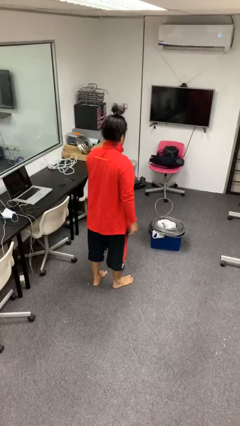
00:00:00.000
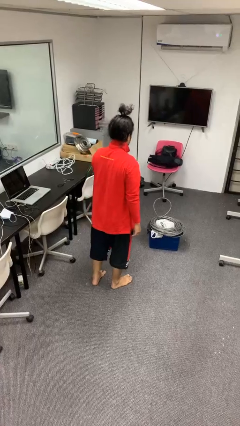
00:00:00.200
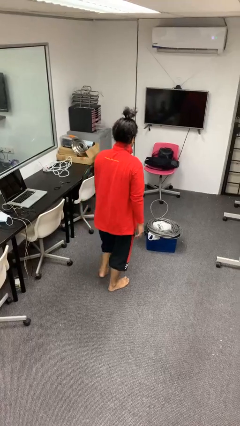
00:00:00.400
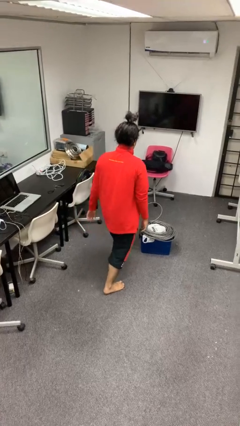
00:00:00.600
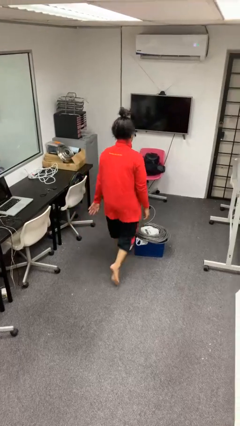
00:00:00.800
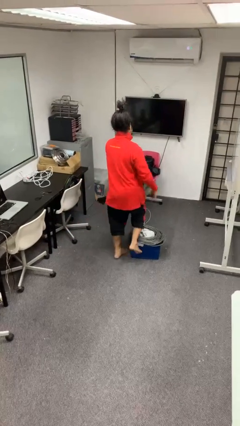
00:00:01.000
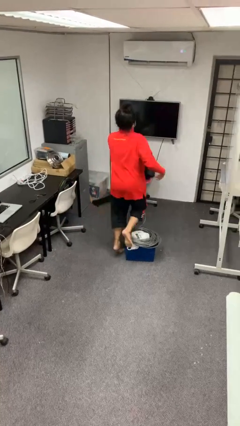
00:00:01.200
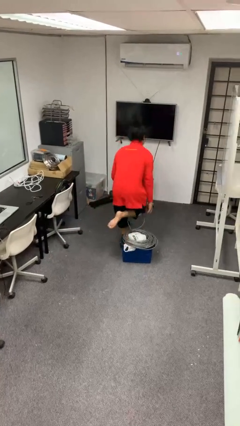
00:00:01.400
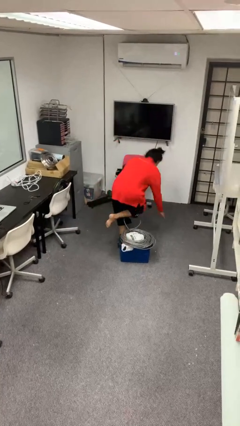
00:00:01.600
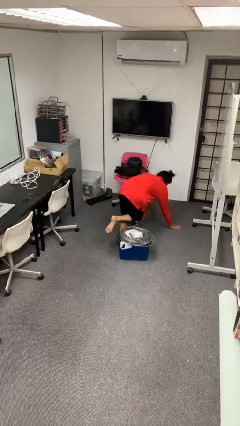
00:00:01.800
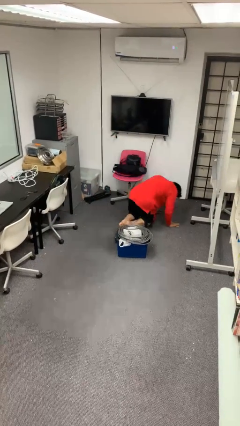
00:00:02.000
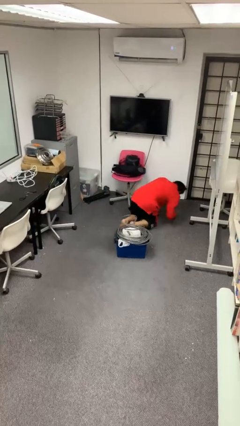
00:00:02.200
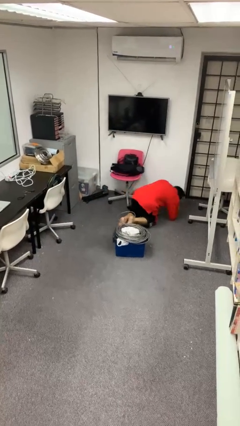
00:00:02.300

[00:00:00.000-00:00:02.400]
person trips on object on floor

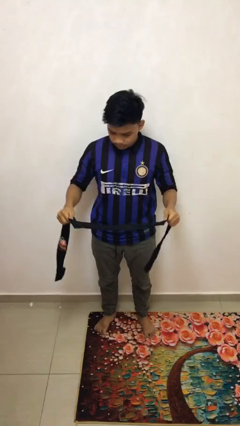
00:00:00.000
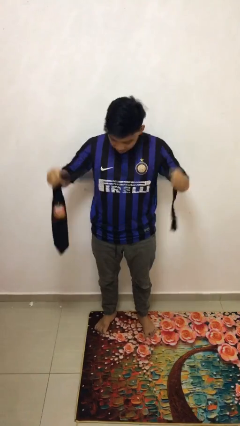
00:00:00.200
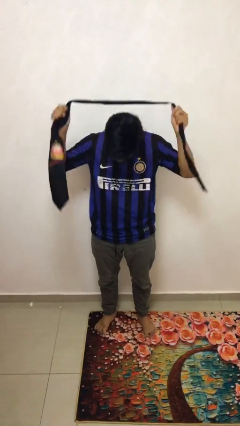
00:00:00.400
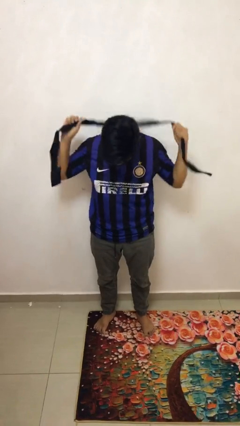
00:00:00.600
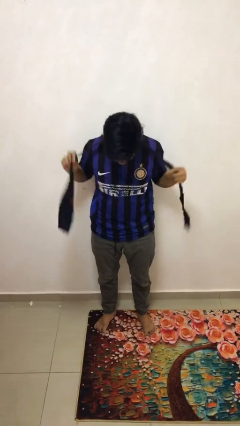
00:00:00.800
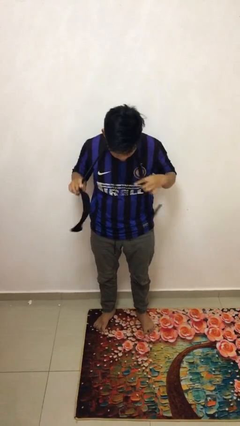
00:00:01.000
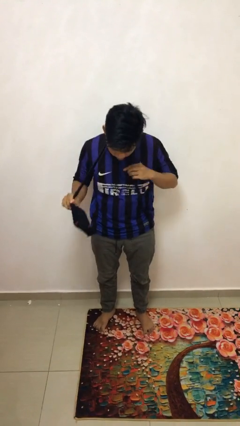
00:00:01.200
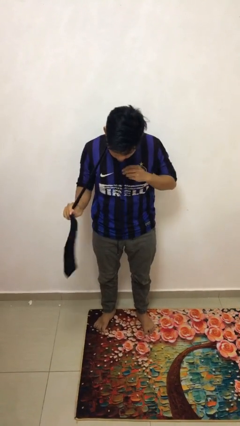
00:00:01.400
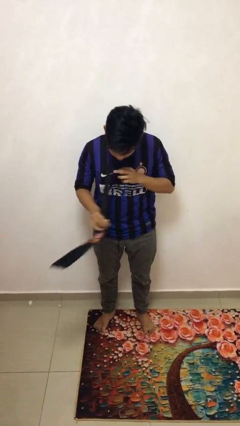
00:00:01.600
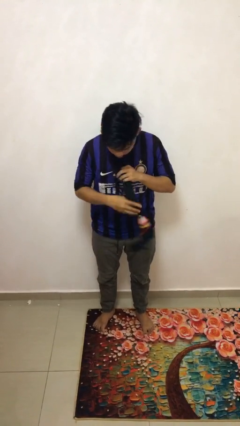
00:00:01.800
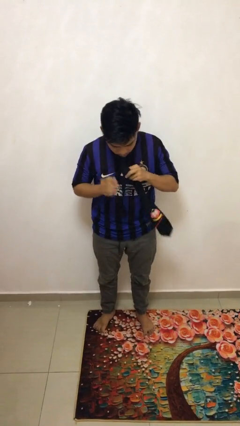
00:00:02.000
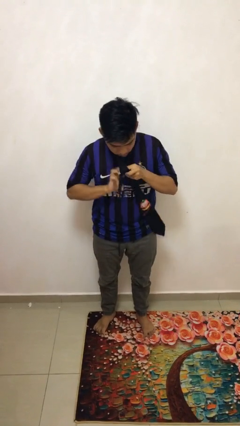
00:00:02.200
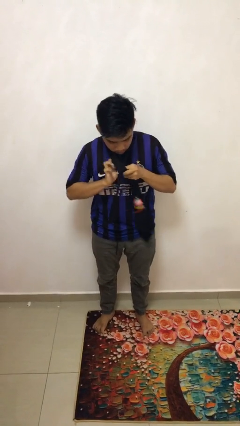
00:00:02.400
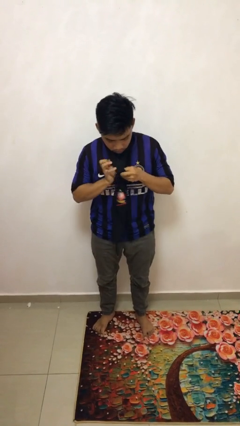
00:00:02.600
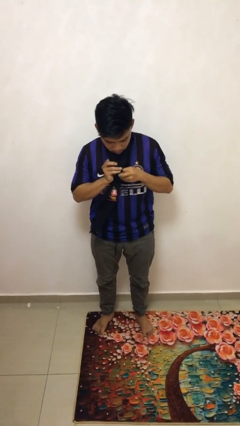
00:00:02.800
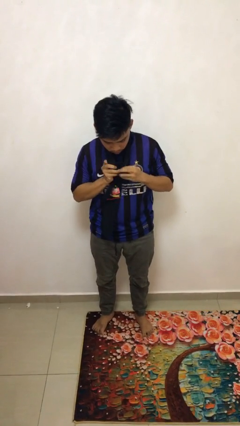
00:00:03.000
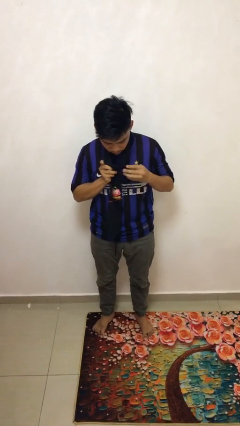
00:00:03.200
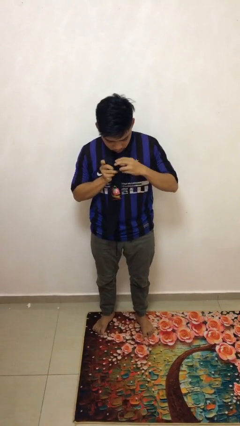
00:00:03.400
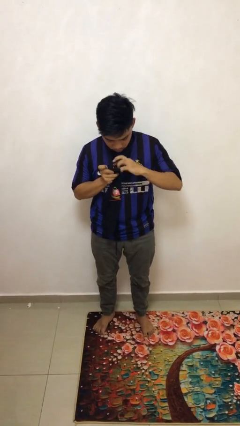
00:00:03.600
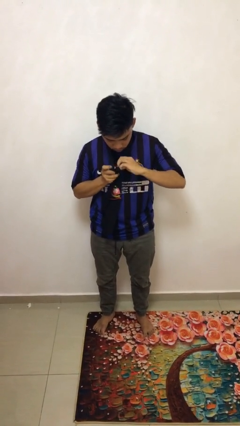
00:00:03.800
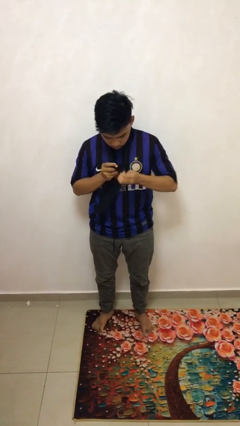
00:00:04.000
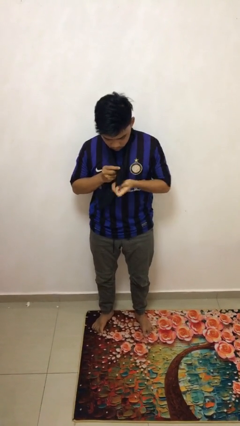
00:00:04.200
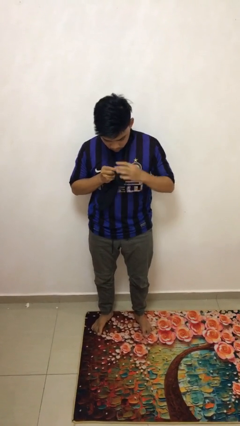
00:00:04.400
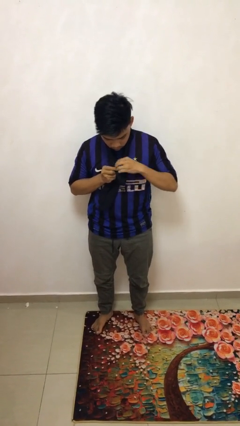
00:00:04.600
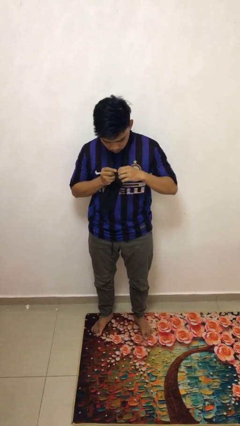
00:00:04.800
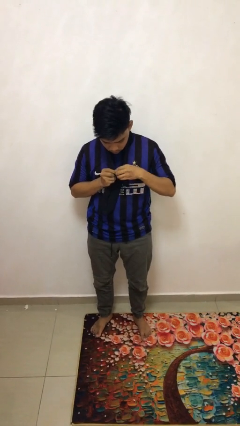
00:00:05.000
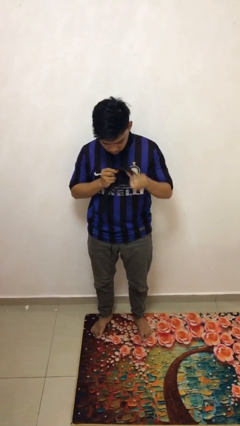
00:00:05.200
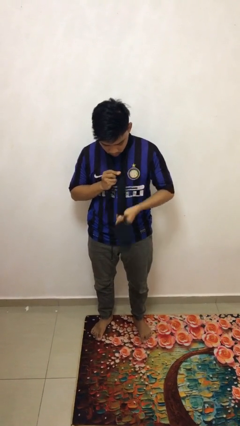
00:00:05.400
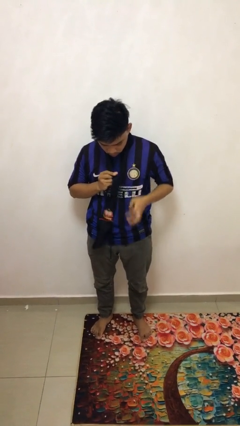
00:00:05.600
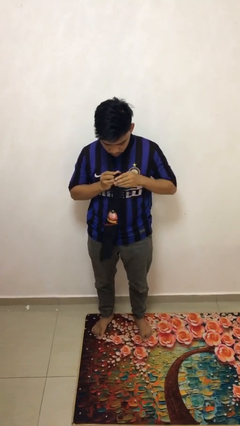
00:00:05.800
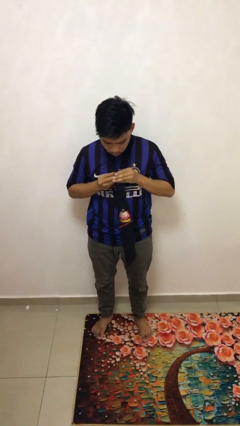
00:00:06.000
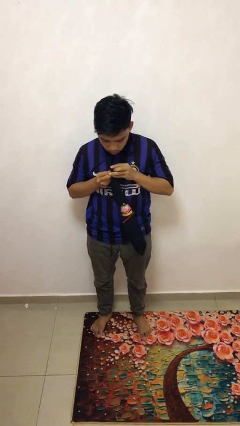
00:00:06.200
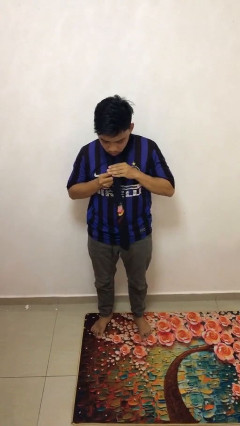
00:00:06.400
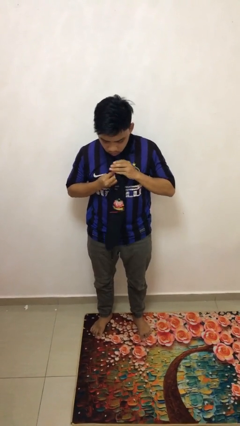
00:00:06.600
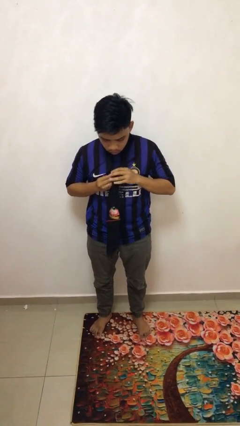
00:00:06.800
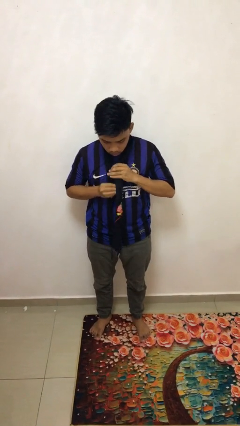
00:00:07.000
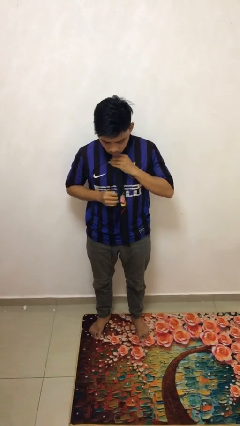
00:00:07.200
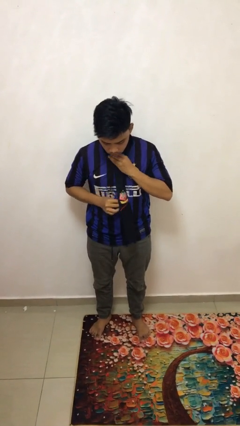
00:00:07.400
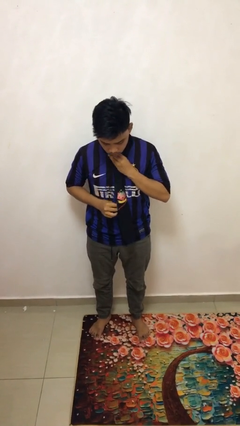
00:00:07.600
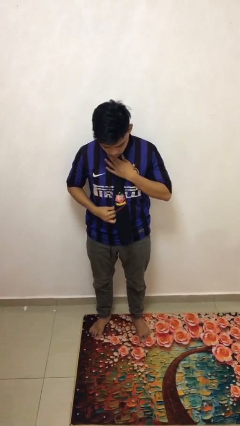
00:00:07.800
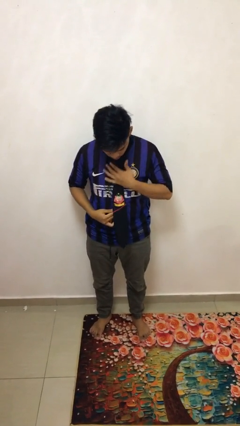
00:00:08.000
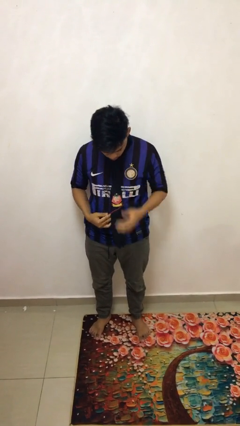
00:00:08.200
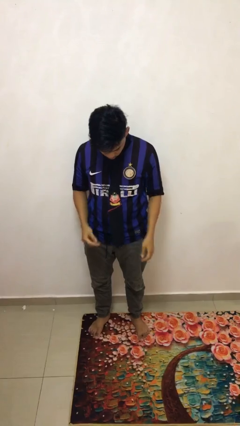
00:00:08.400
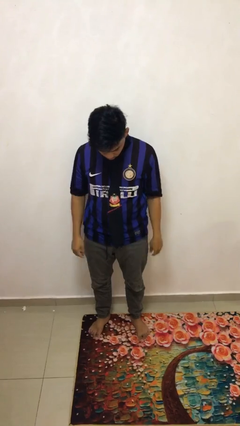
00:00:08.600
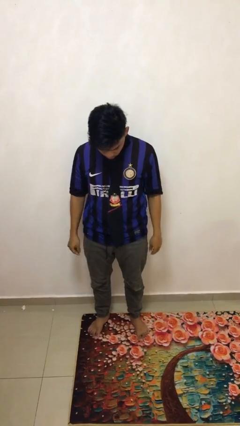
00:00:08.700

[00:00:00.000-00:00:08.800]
person puts on necktie

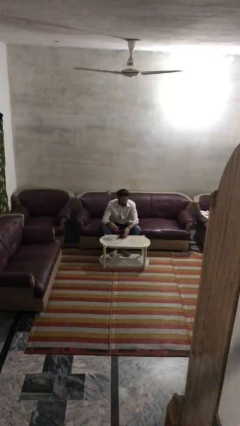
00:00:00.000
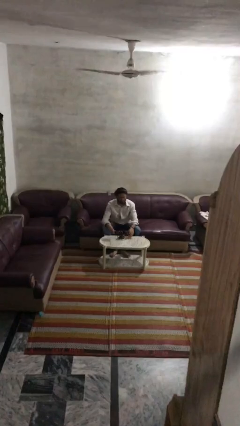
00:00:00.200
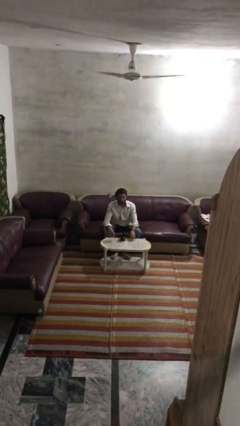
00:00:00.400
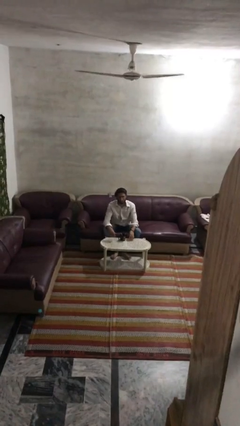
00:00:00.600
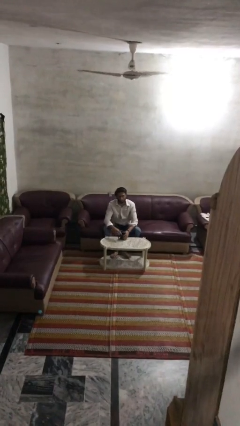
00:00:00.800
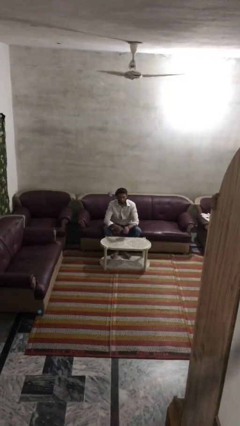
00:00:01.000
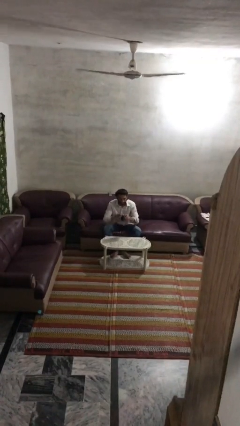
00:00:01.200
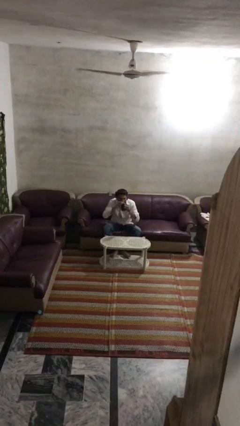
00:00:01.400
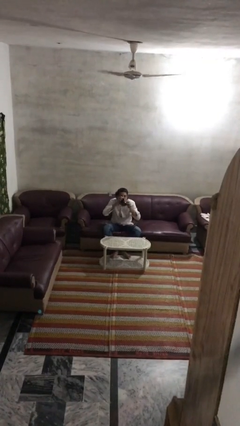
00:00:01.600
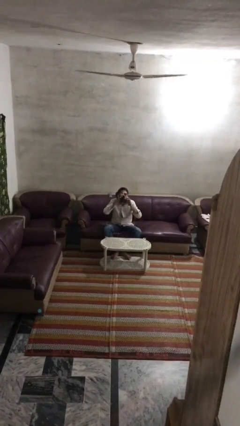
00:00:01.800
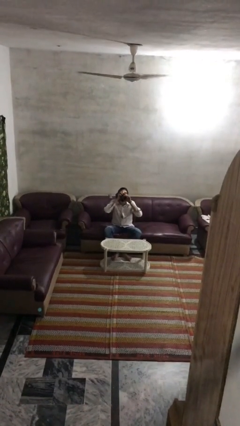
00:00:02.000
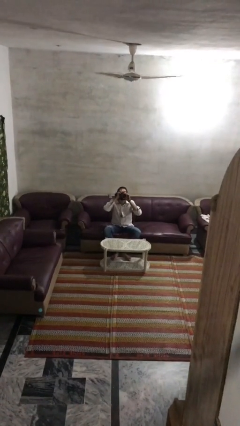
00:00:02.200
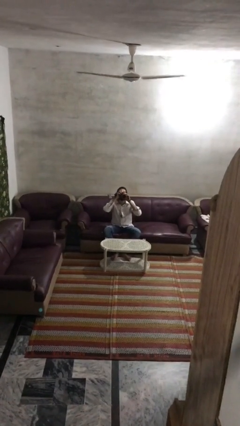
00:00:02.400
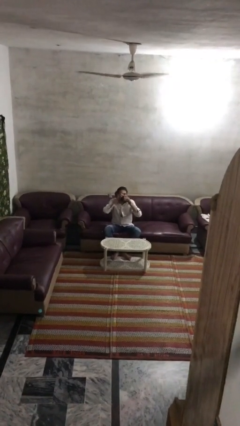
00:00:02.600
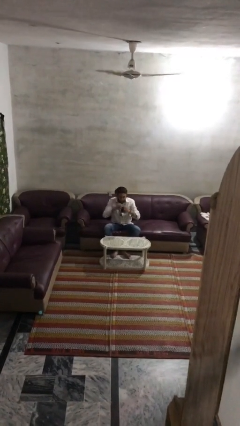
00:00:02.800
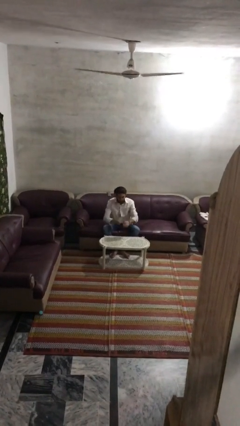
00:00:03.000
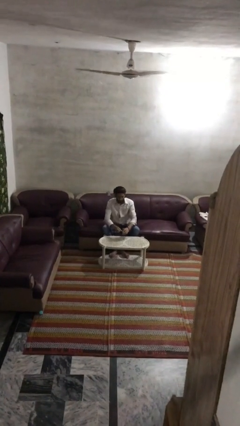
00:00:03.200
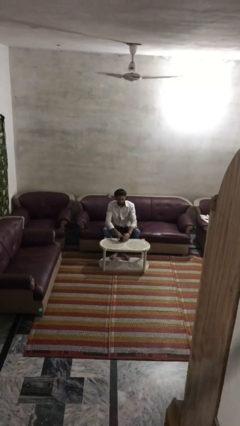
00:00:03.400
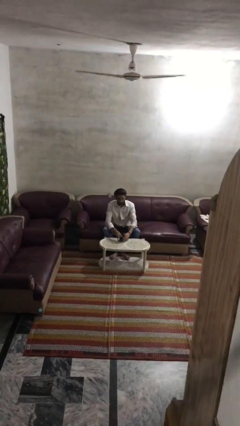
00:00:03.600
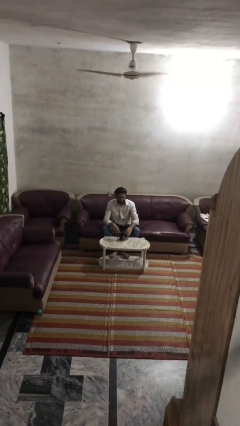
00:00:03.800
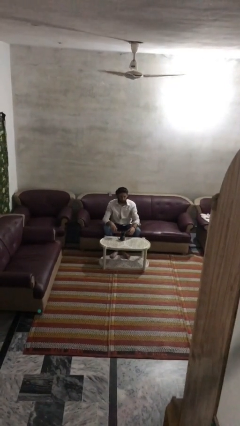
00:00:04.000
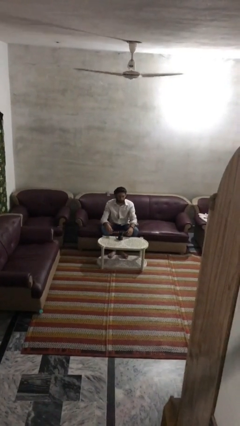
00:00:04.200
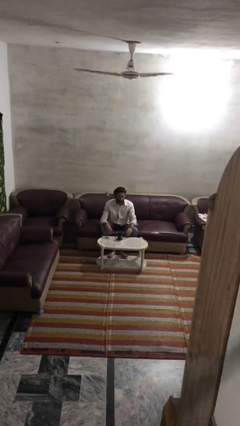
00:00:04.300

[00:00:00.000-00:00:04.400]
person drinks from mug

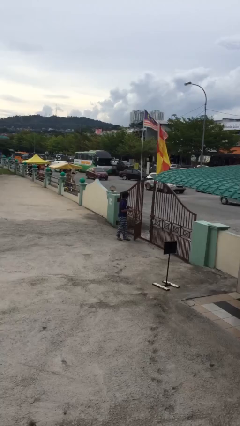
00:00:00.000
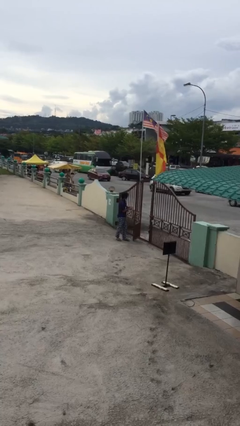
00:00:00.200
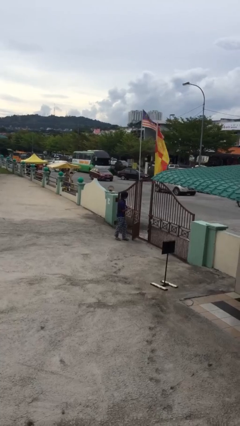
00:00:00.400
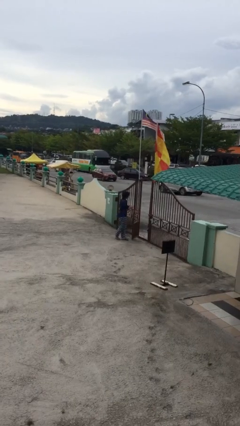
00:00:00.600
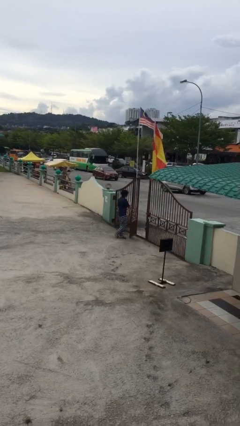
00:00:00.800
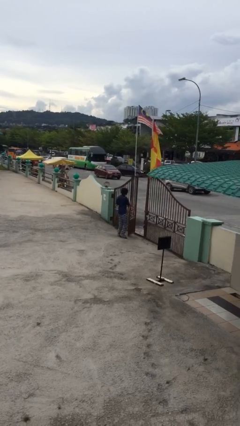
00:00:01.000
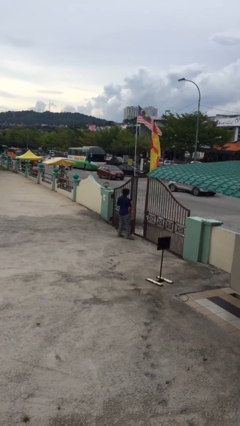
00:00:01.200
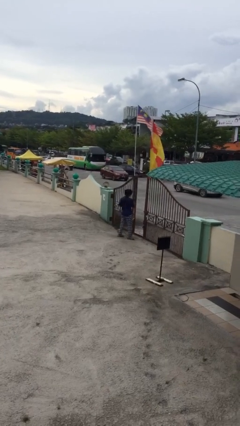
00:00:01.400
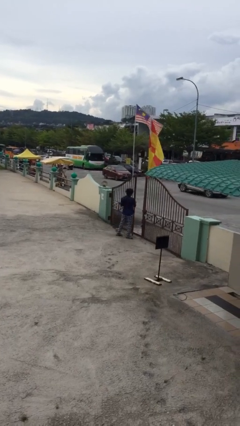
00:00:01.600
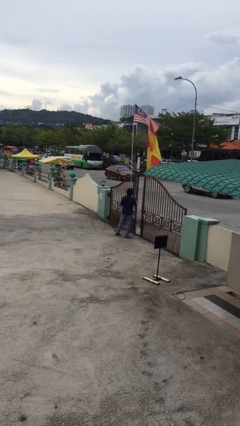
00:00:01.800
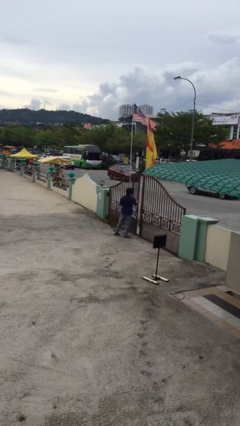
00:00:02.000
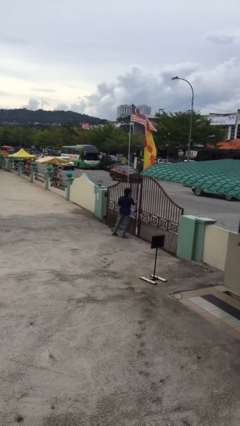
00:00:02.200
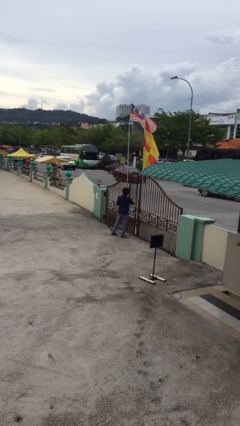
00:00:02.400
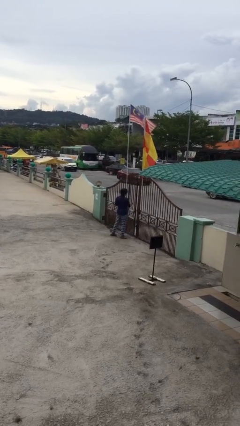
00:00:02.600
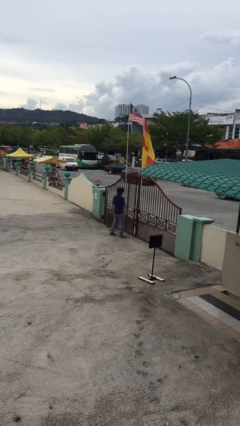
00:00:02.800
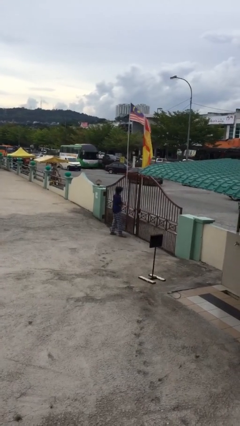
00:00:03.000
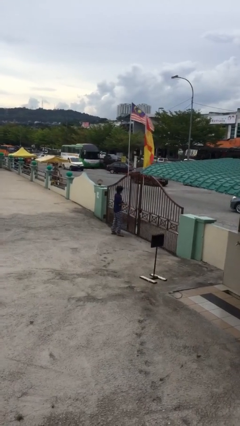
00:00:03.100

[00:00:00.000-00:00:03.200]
person closes facility door
